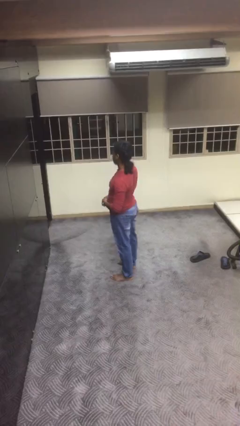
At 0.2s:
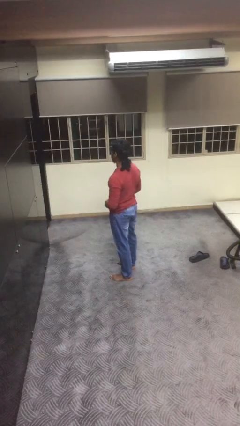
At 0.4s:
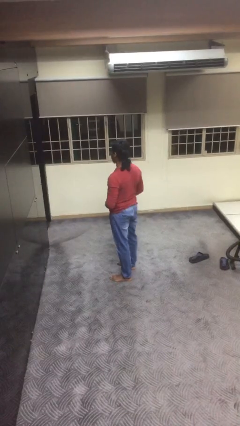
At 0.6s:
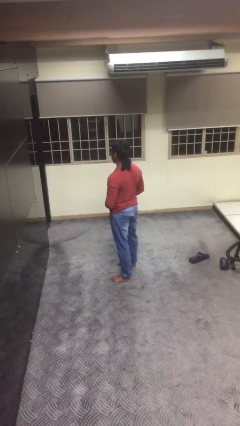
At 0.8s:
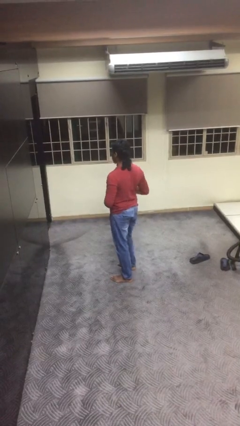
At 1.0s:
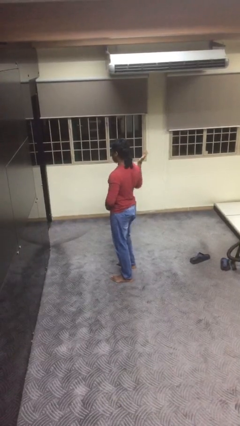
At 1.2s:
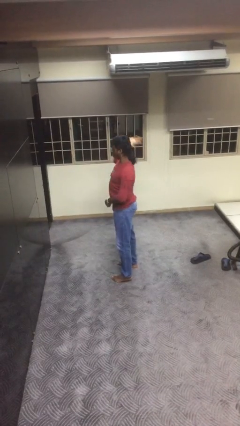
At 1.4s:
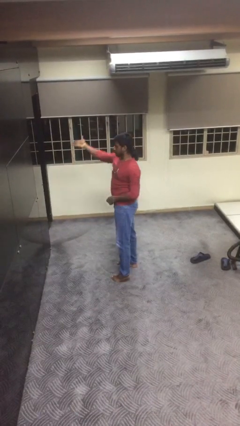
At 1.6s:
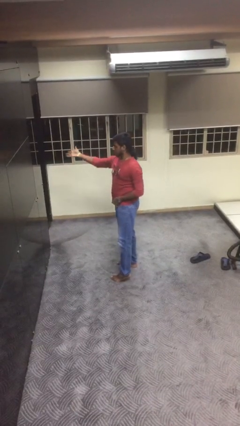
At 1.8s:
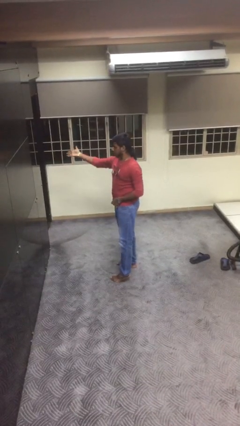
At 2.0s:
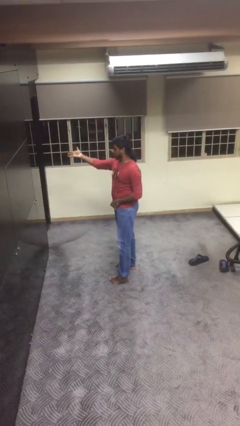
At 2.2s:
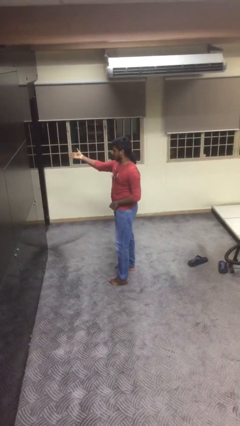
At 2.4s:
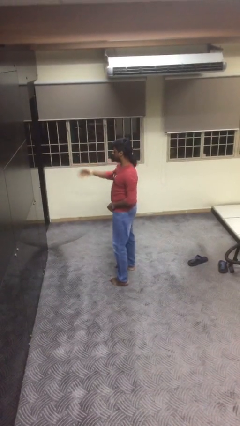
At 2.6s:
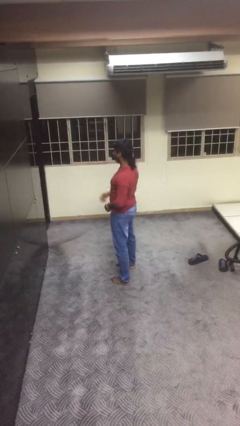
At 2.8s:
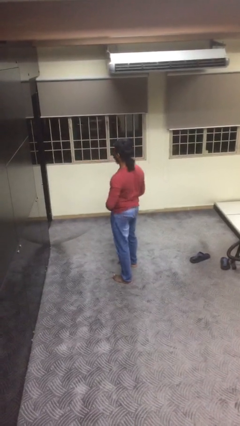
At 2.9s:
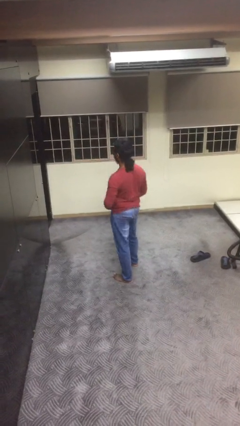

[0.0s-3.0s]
person karate chop

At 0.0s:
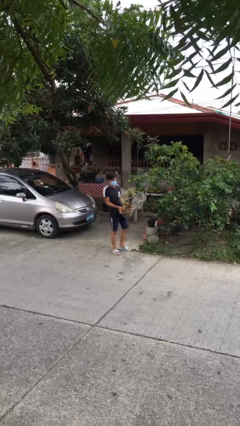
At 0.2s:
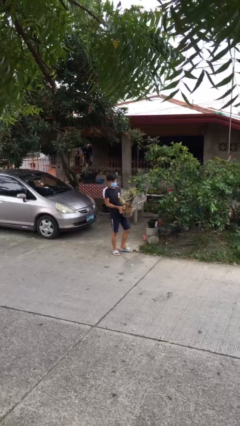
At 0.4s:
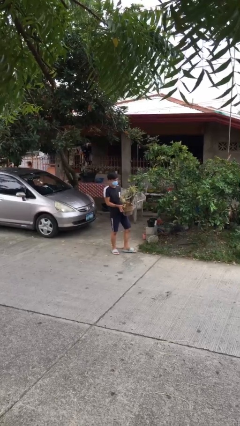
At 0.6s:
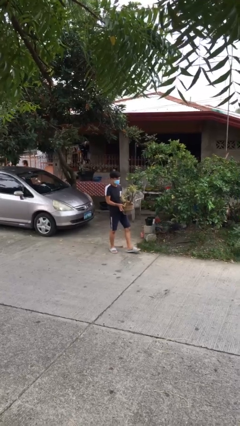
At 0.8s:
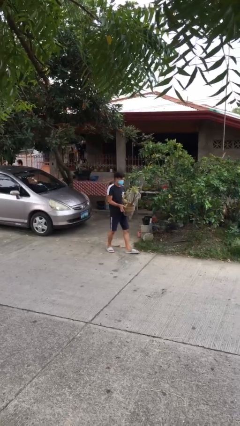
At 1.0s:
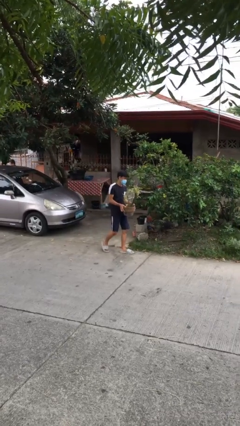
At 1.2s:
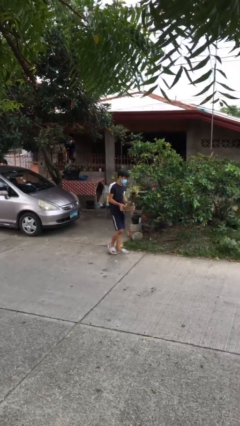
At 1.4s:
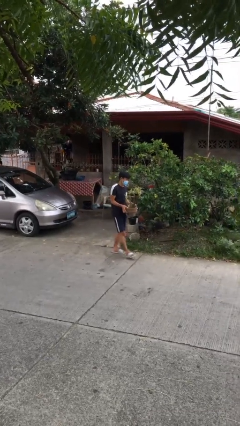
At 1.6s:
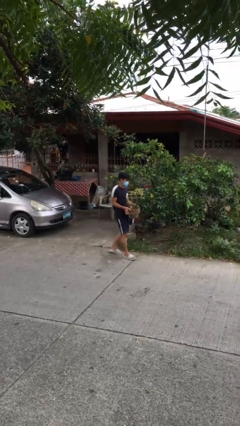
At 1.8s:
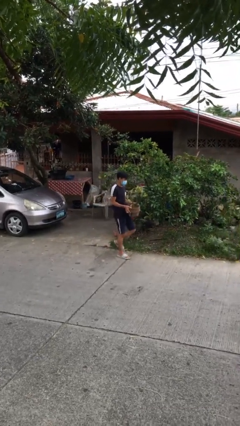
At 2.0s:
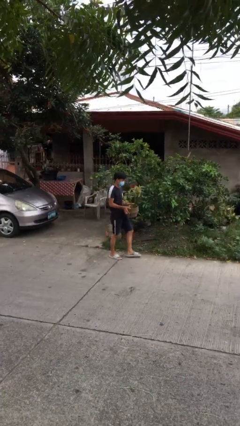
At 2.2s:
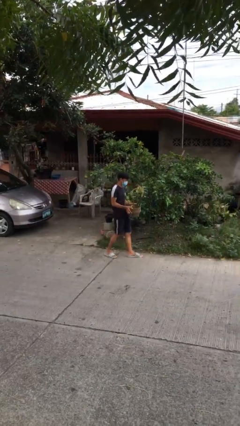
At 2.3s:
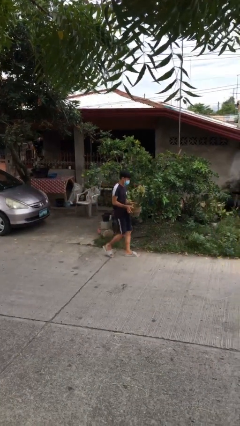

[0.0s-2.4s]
person carries heavy object

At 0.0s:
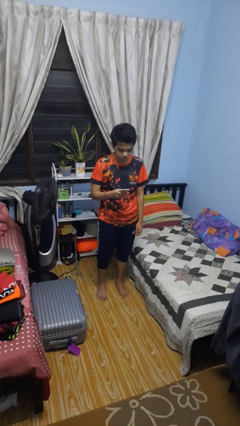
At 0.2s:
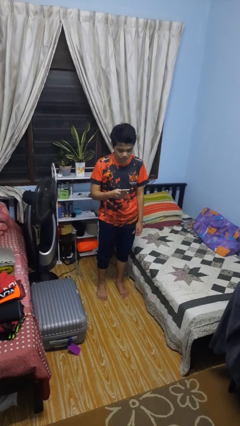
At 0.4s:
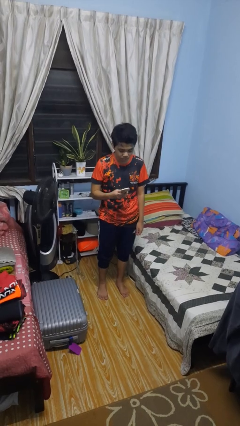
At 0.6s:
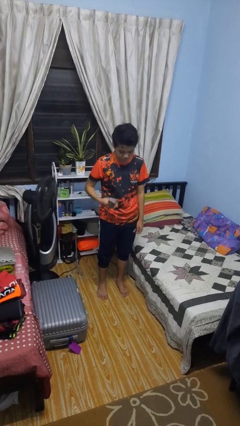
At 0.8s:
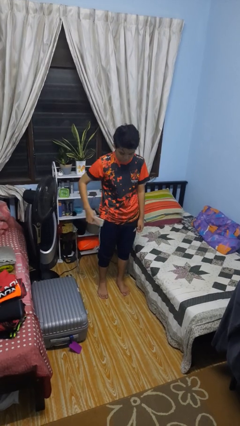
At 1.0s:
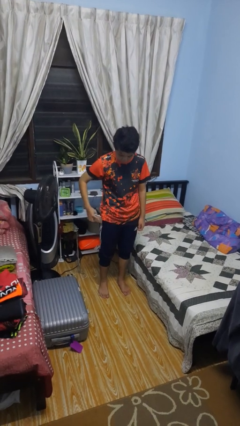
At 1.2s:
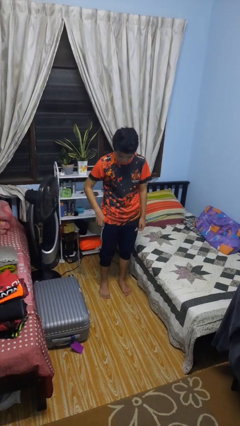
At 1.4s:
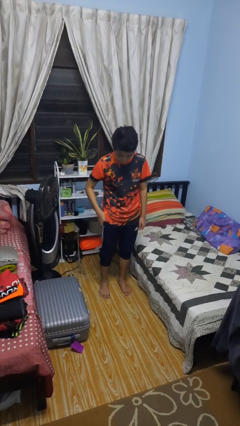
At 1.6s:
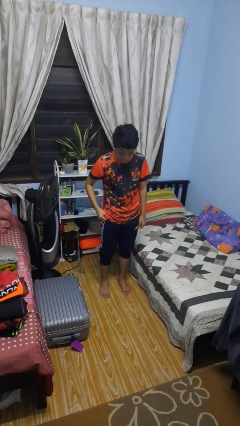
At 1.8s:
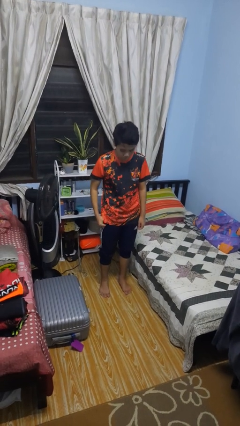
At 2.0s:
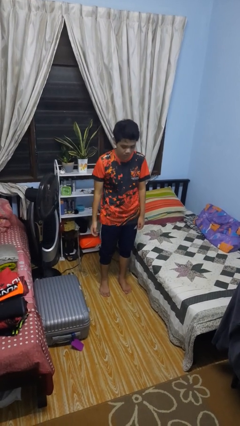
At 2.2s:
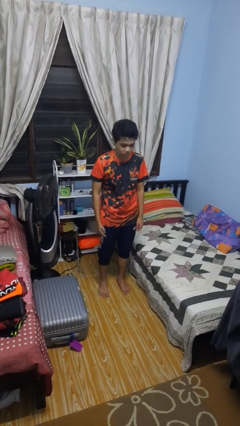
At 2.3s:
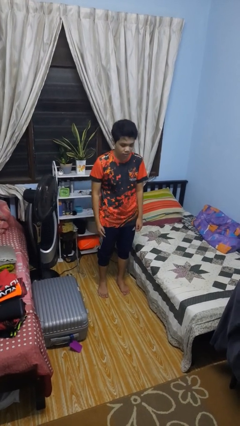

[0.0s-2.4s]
person puts phone into pocket

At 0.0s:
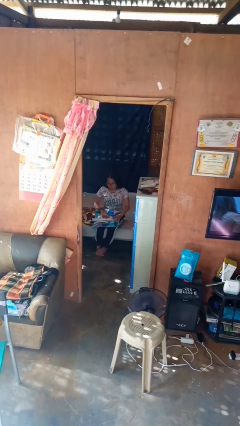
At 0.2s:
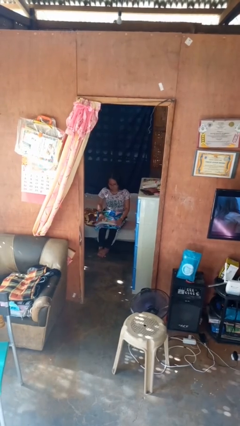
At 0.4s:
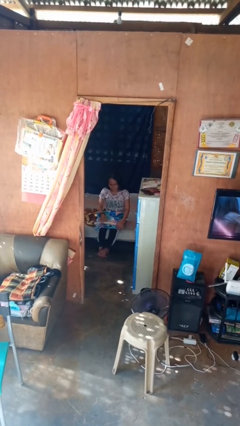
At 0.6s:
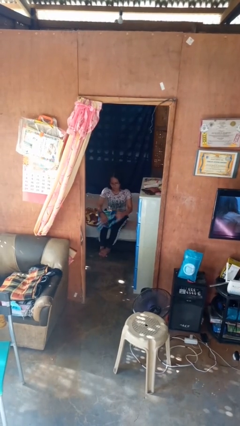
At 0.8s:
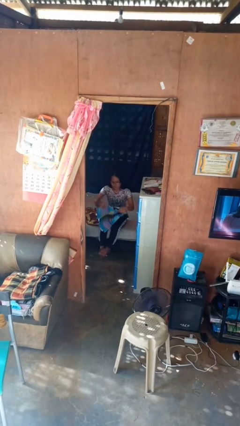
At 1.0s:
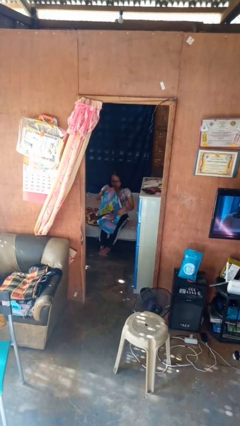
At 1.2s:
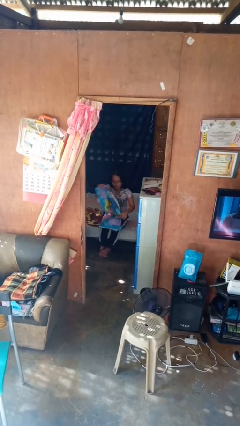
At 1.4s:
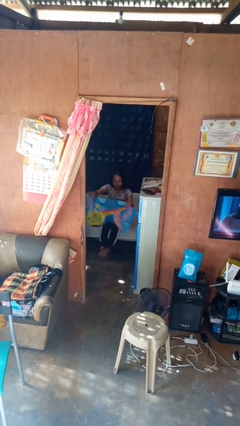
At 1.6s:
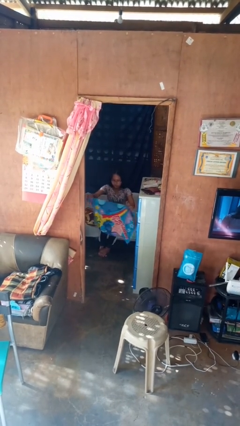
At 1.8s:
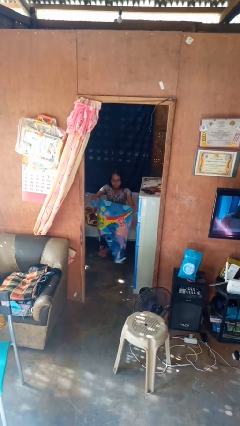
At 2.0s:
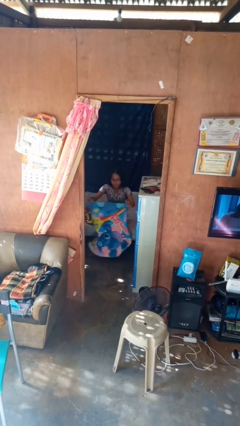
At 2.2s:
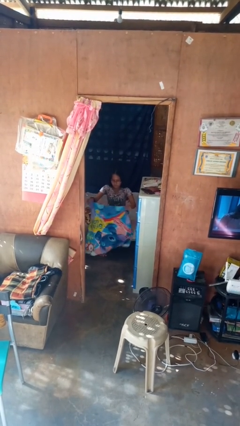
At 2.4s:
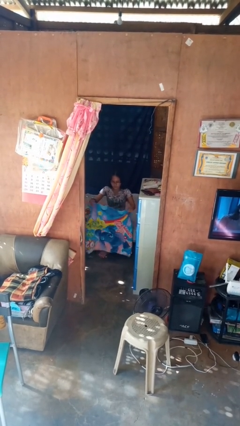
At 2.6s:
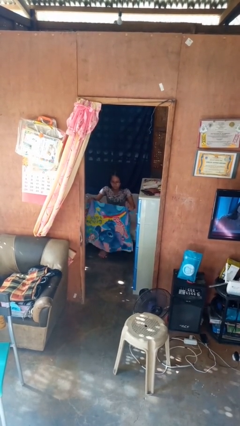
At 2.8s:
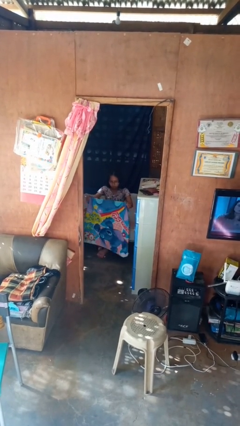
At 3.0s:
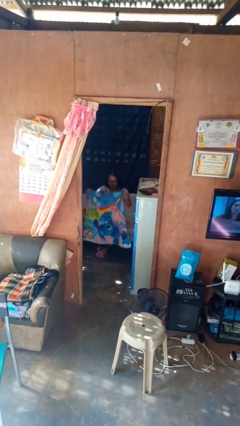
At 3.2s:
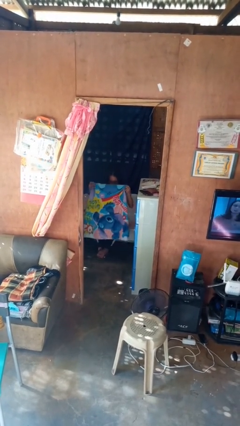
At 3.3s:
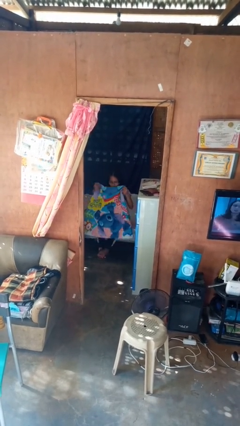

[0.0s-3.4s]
person unfolds blanket

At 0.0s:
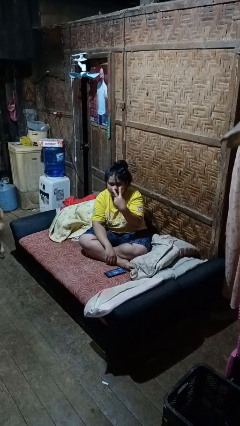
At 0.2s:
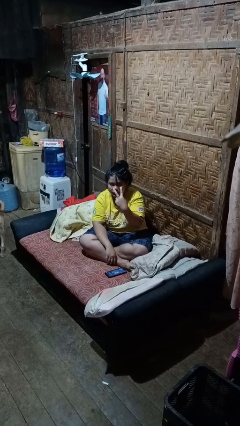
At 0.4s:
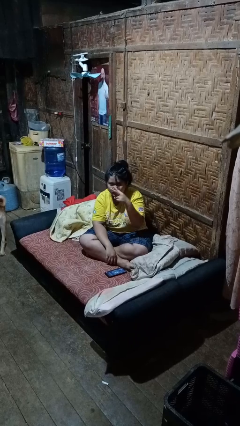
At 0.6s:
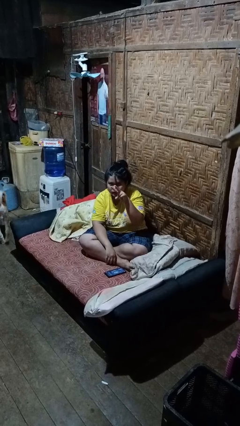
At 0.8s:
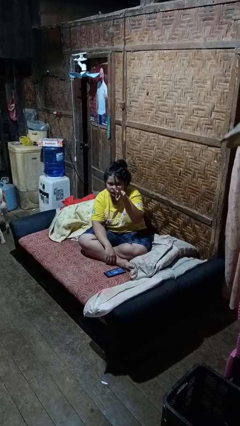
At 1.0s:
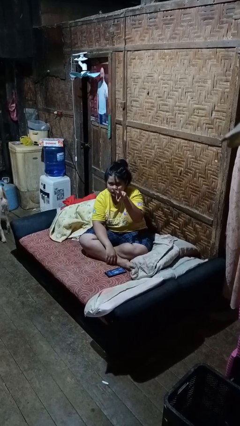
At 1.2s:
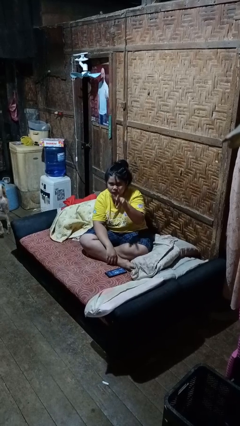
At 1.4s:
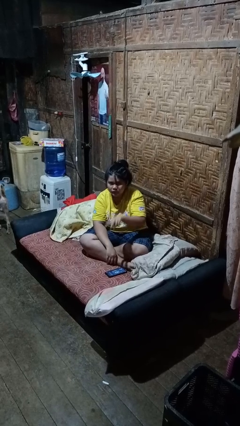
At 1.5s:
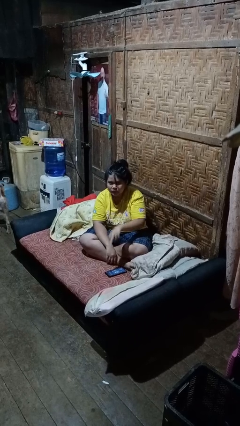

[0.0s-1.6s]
person gestures watch closely

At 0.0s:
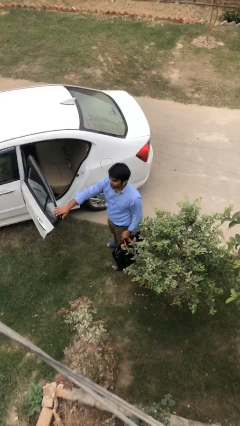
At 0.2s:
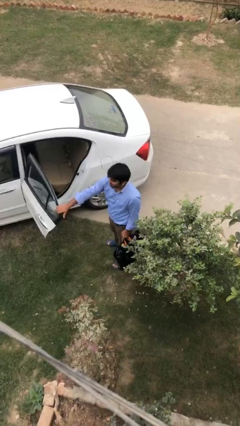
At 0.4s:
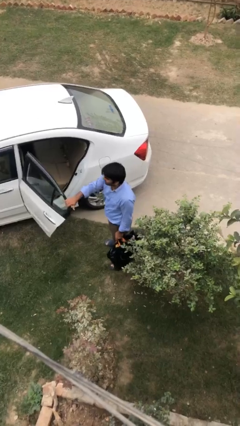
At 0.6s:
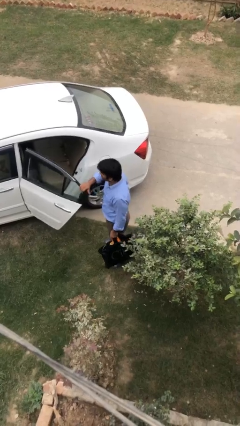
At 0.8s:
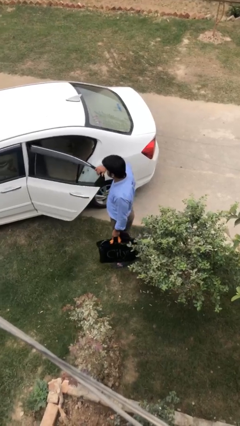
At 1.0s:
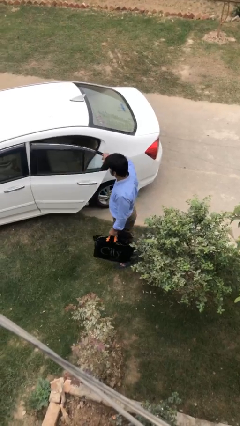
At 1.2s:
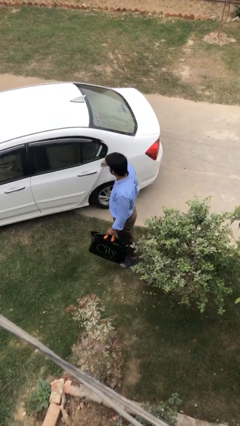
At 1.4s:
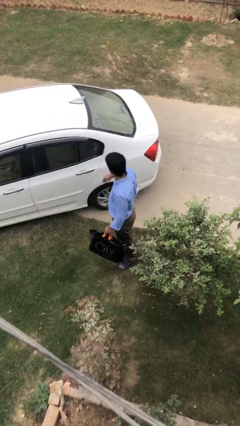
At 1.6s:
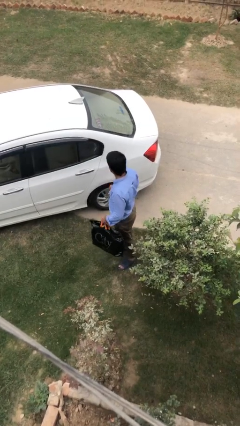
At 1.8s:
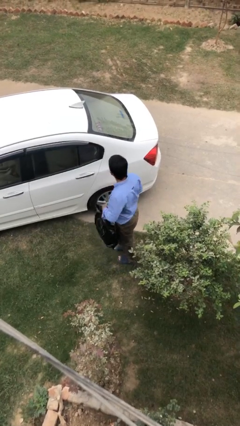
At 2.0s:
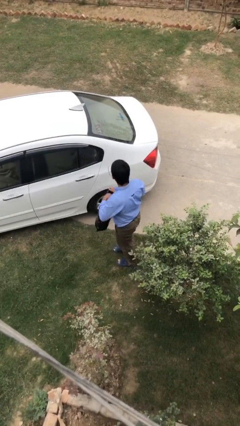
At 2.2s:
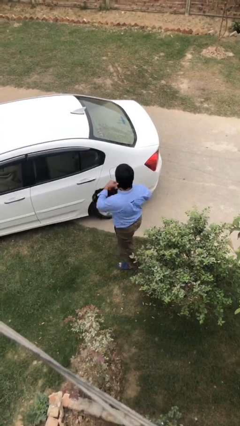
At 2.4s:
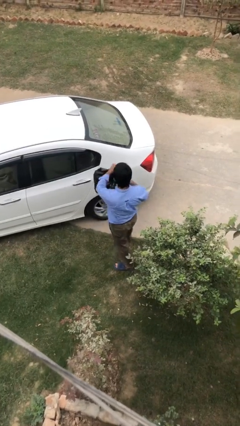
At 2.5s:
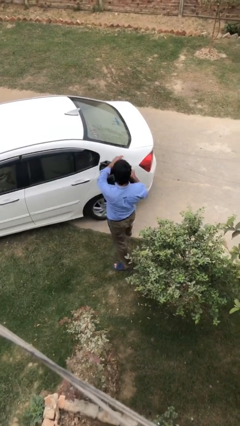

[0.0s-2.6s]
person closes car door

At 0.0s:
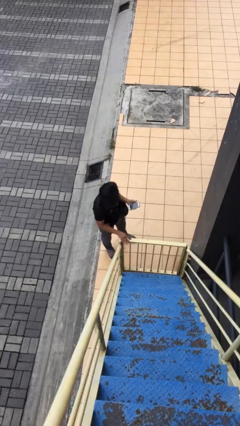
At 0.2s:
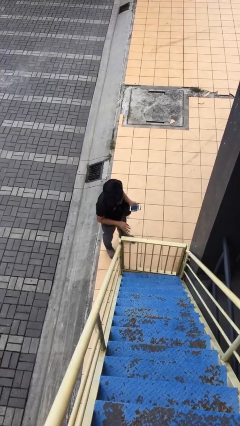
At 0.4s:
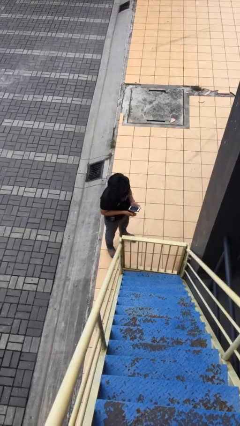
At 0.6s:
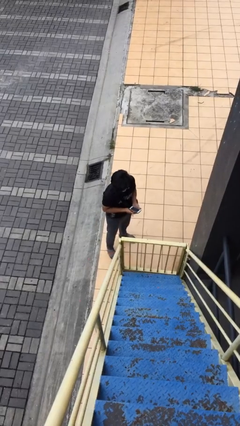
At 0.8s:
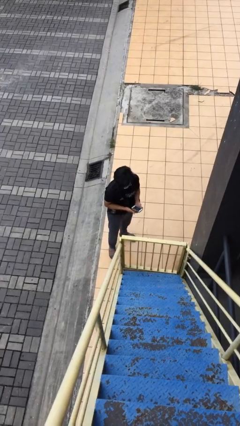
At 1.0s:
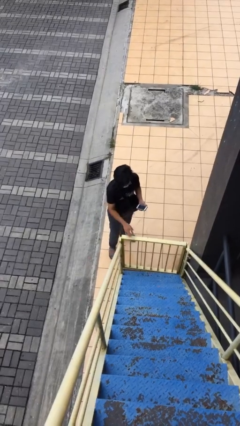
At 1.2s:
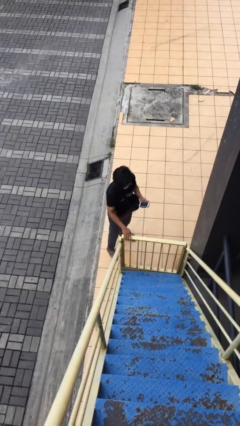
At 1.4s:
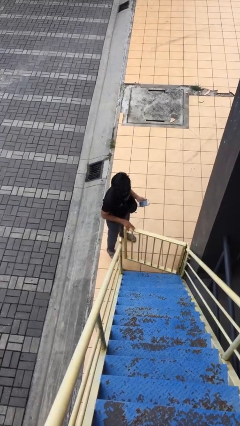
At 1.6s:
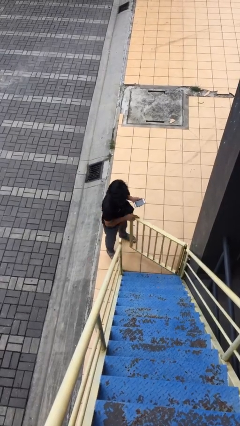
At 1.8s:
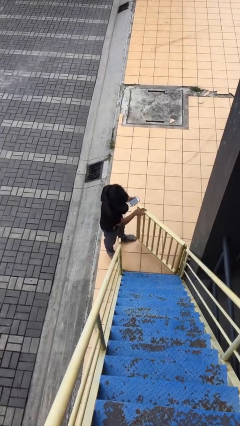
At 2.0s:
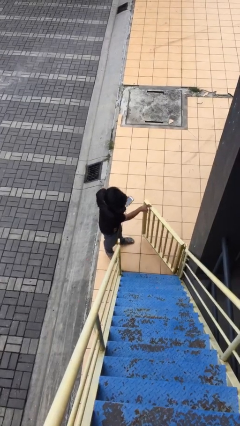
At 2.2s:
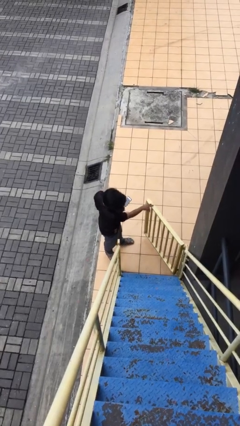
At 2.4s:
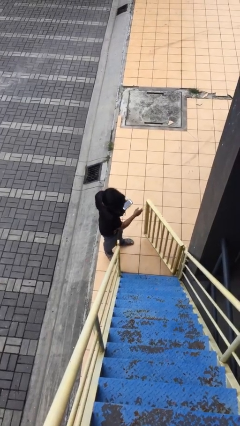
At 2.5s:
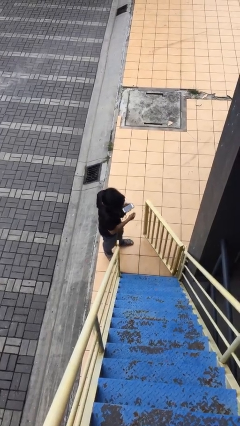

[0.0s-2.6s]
person opens facility door
